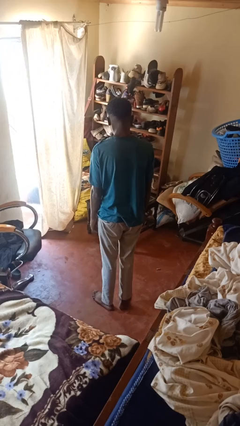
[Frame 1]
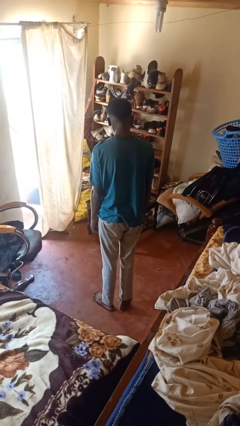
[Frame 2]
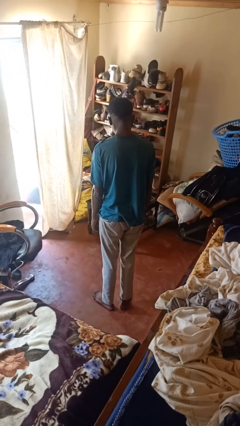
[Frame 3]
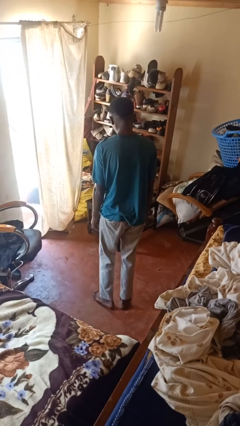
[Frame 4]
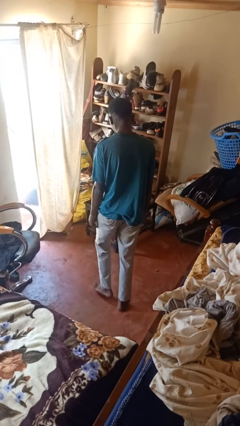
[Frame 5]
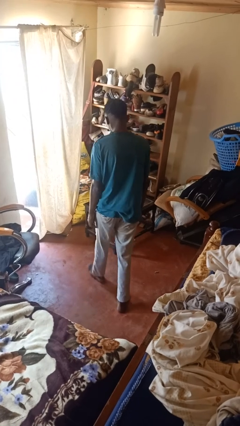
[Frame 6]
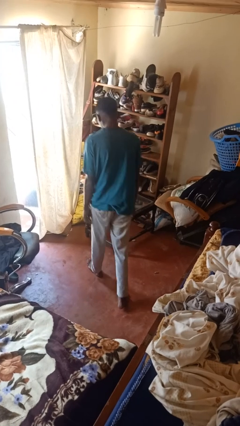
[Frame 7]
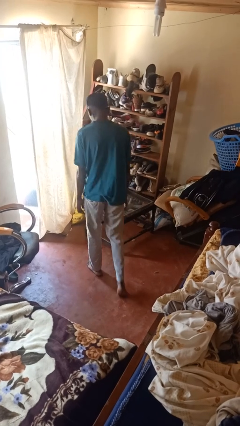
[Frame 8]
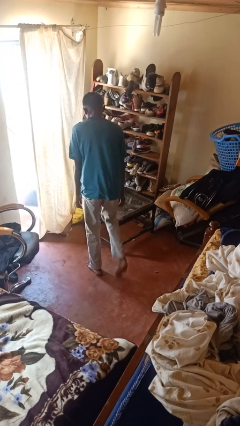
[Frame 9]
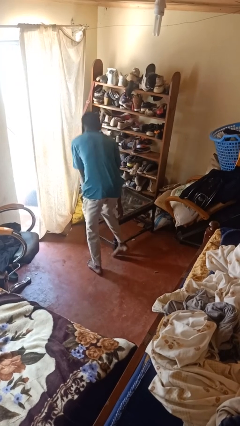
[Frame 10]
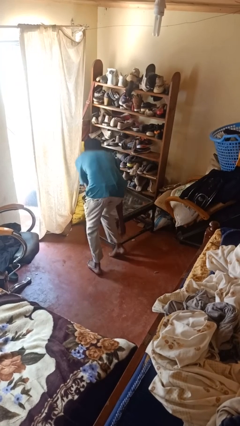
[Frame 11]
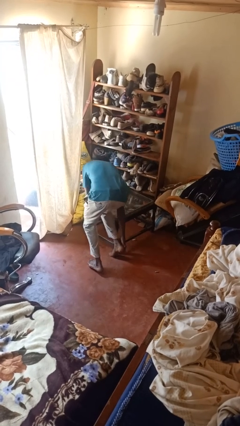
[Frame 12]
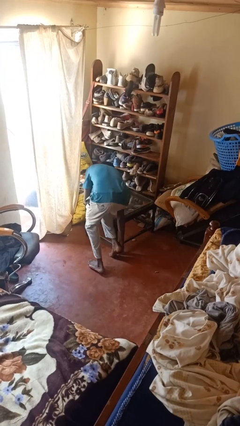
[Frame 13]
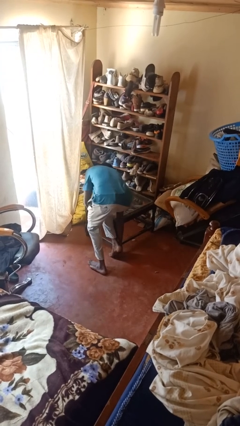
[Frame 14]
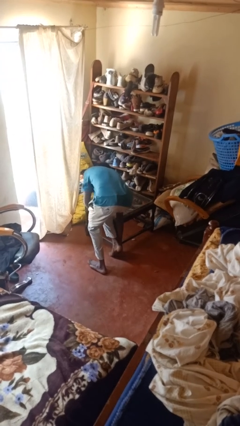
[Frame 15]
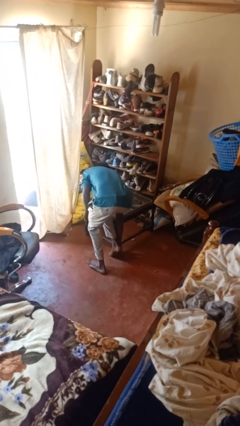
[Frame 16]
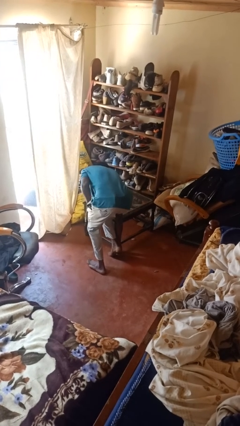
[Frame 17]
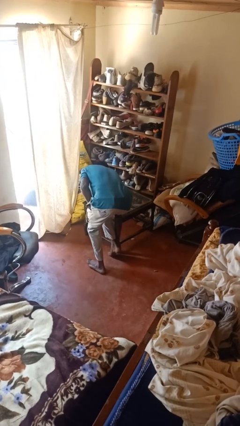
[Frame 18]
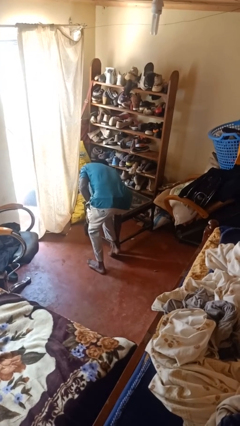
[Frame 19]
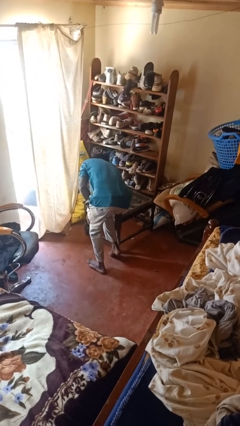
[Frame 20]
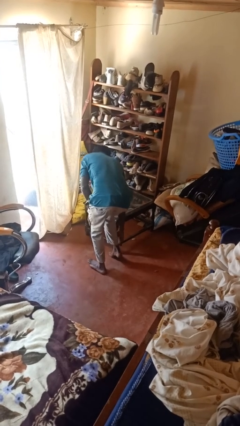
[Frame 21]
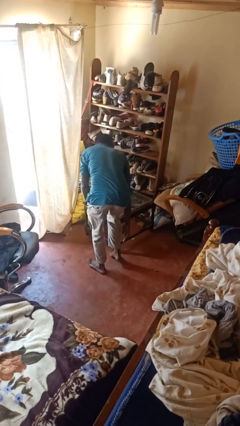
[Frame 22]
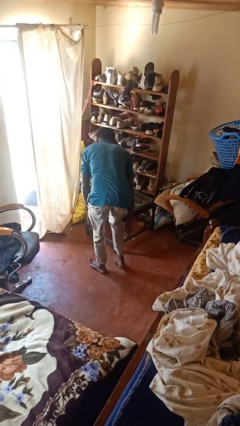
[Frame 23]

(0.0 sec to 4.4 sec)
person stubs toe

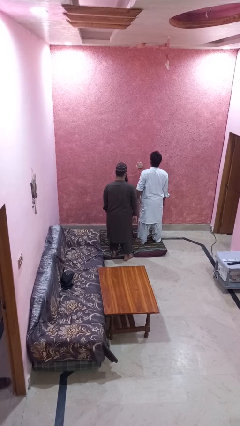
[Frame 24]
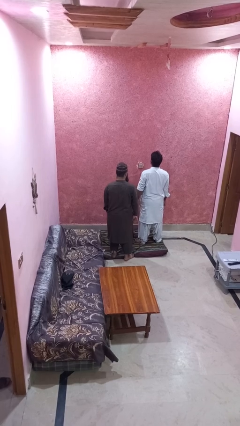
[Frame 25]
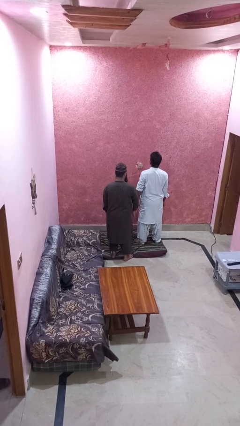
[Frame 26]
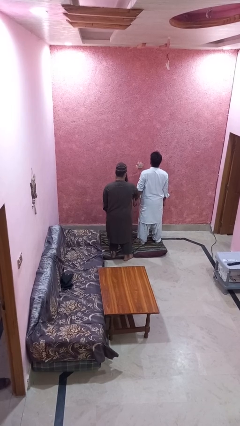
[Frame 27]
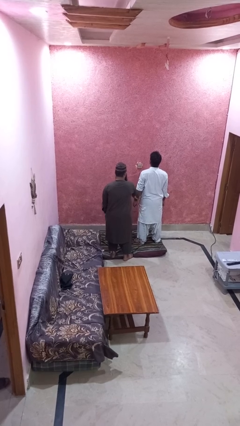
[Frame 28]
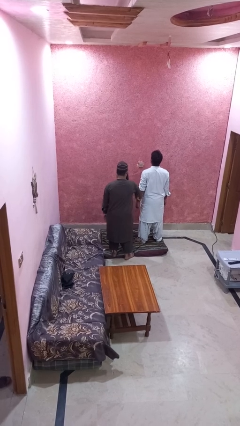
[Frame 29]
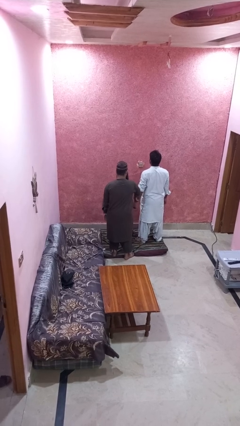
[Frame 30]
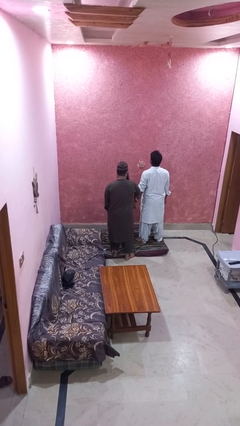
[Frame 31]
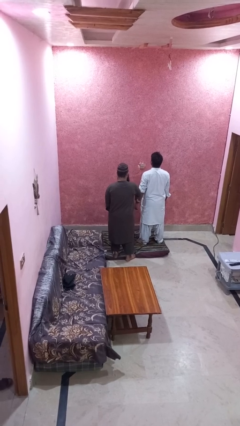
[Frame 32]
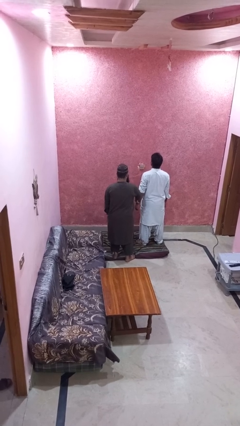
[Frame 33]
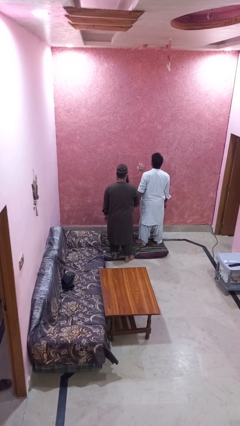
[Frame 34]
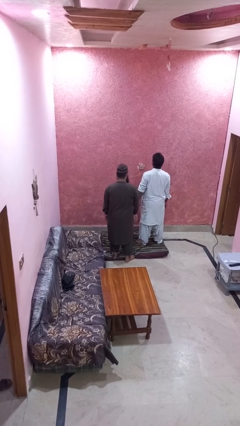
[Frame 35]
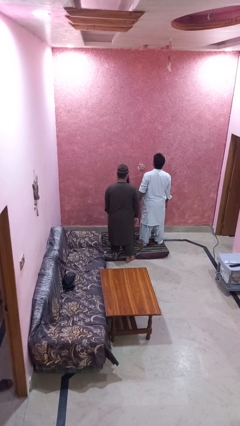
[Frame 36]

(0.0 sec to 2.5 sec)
person grabs person by forearm

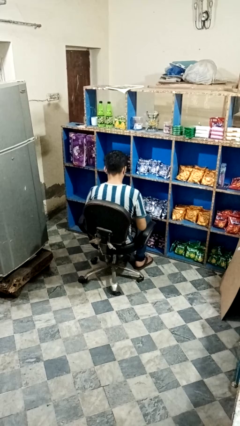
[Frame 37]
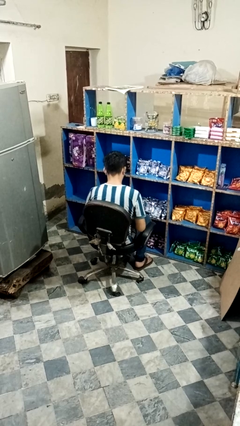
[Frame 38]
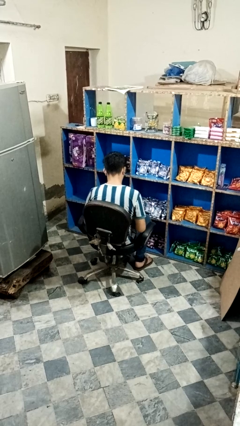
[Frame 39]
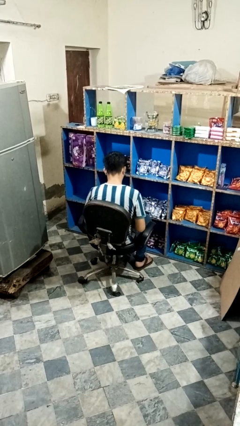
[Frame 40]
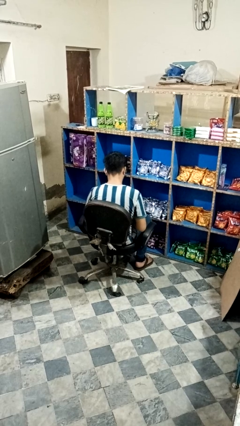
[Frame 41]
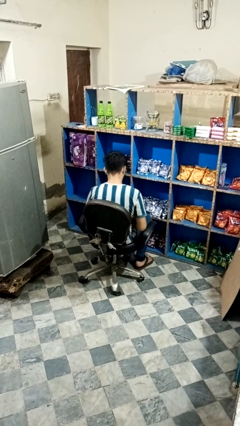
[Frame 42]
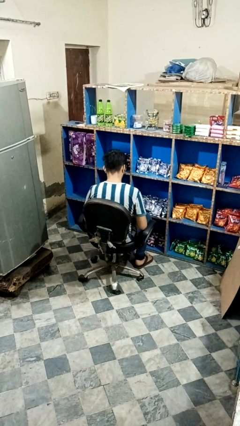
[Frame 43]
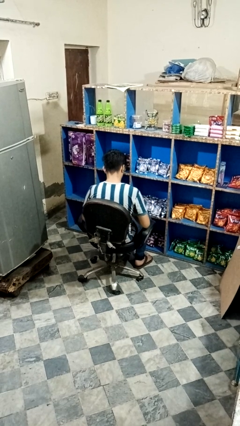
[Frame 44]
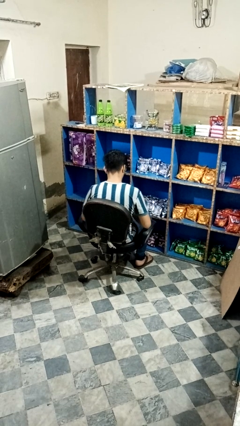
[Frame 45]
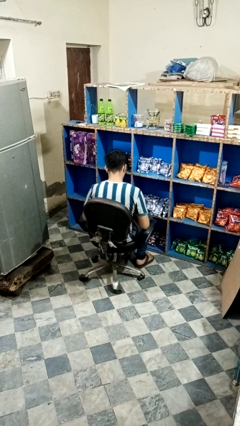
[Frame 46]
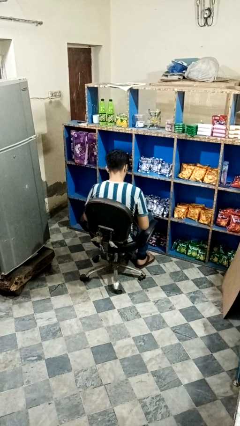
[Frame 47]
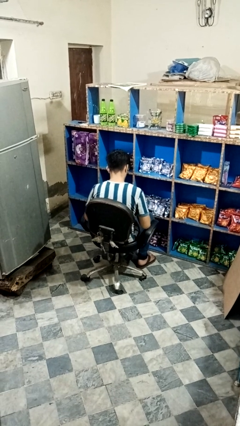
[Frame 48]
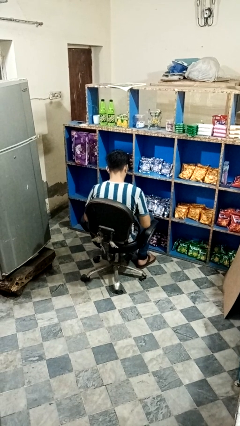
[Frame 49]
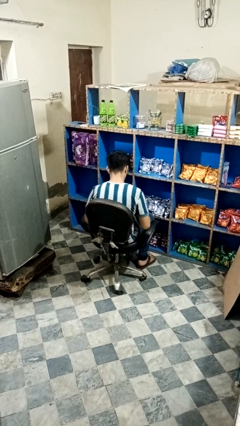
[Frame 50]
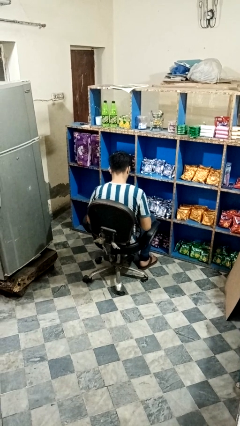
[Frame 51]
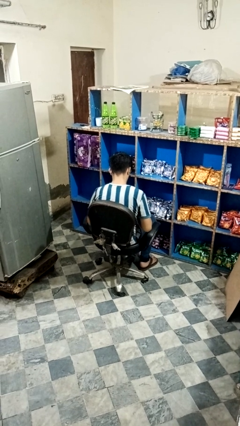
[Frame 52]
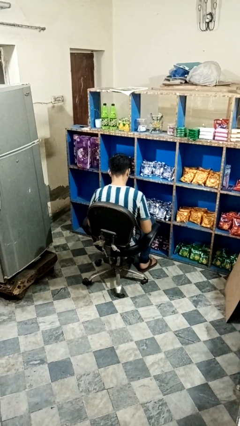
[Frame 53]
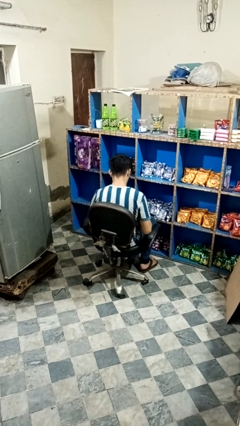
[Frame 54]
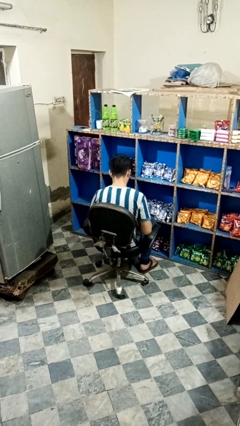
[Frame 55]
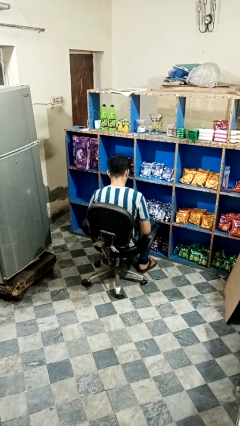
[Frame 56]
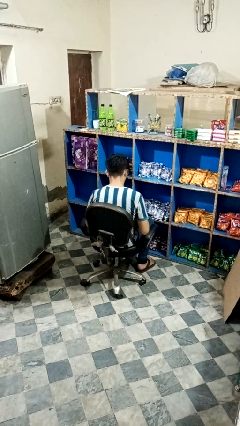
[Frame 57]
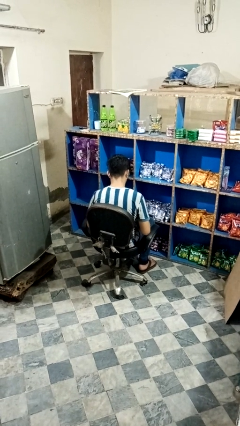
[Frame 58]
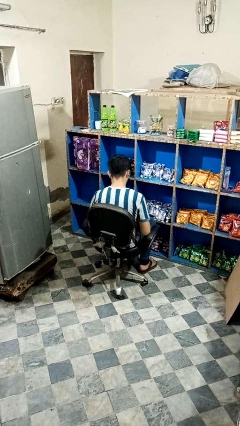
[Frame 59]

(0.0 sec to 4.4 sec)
person looks at hands in lap

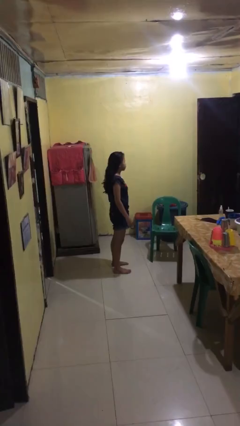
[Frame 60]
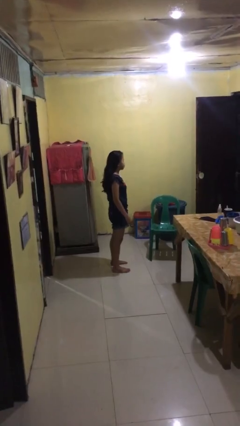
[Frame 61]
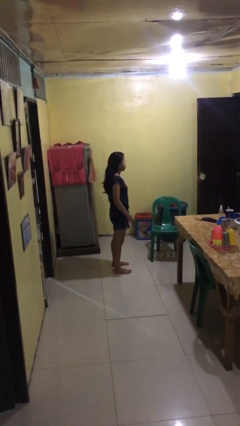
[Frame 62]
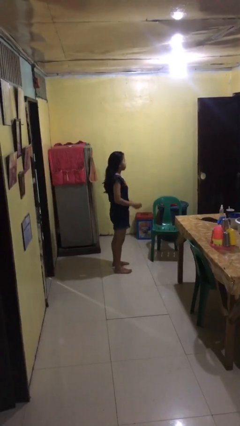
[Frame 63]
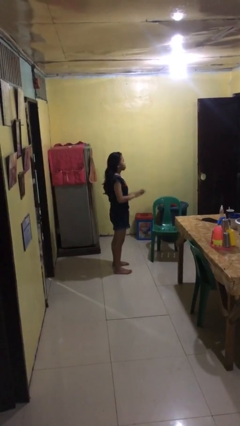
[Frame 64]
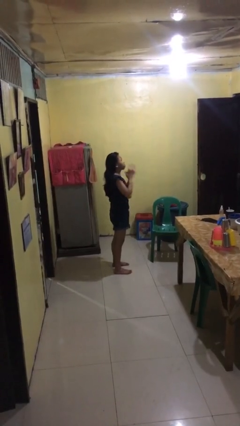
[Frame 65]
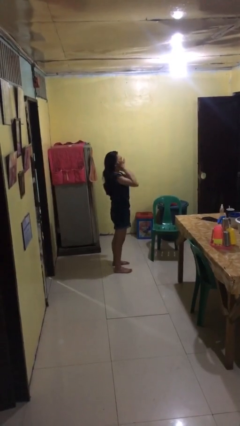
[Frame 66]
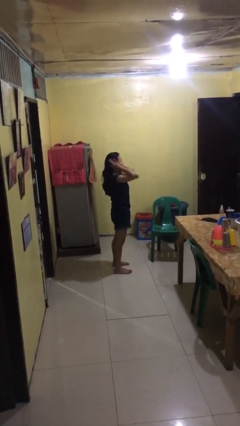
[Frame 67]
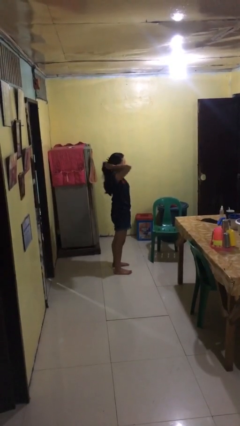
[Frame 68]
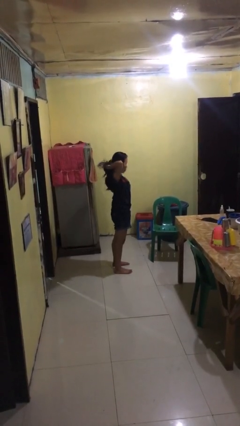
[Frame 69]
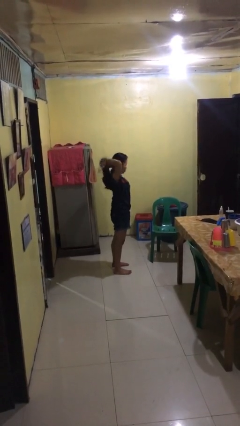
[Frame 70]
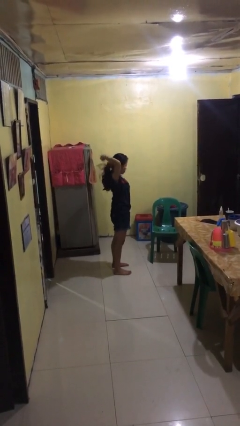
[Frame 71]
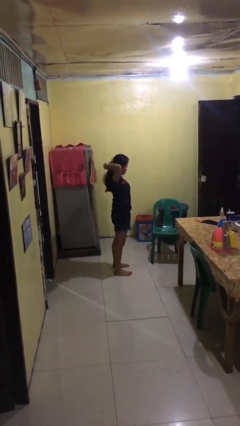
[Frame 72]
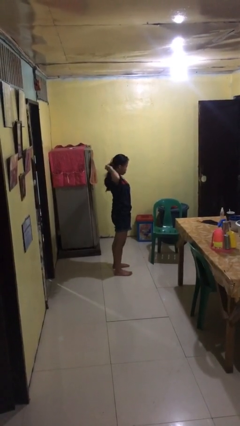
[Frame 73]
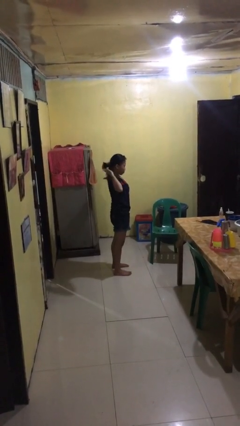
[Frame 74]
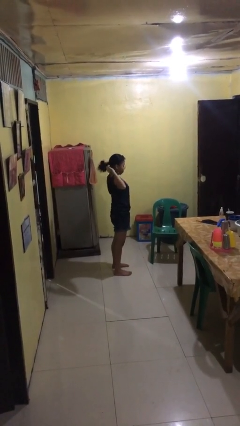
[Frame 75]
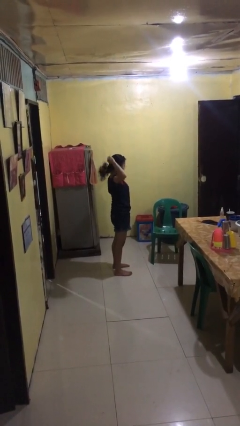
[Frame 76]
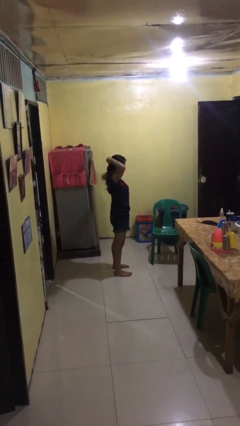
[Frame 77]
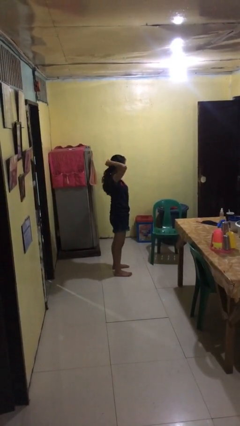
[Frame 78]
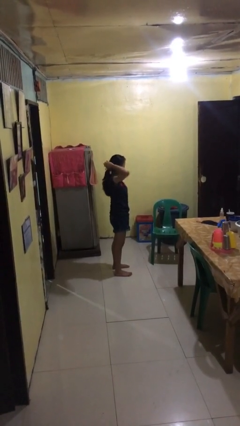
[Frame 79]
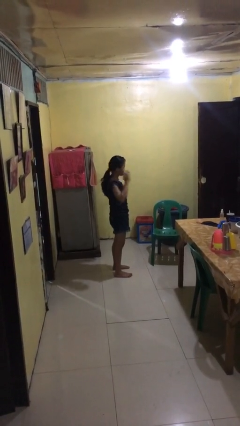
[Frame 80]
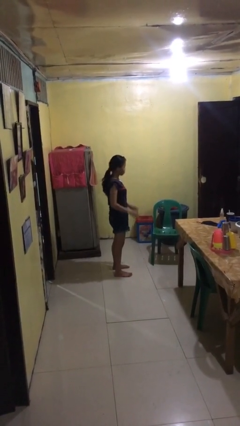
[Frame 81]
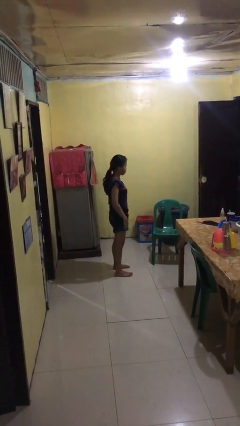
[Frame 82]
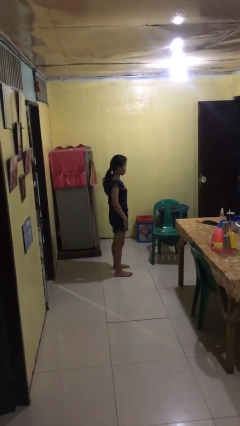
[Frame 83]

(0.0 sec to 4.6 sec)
person puts hair in ponytail

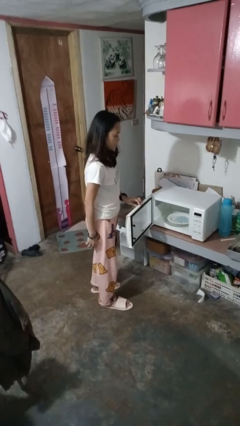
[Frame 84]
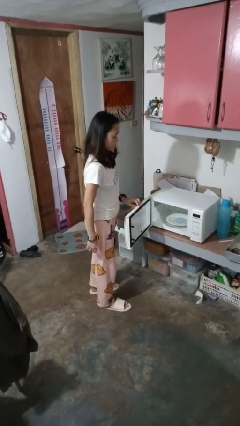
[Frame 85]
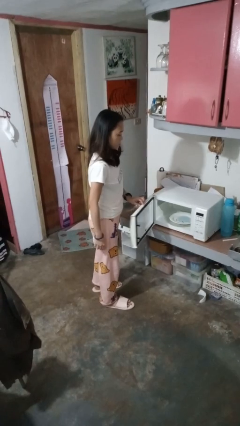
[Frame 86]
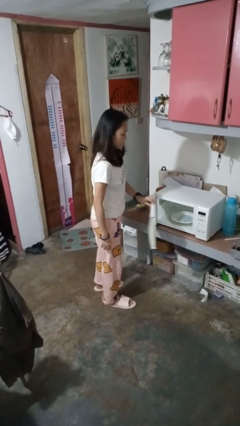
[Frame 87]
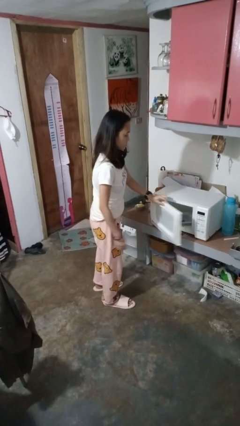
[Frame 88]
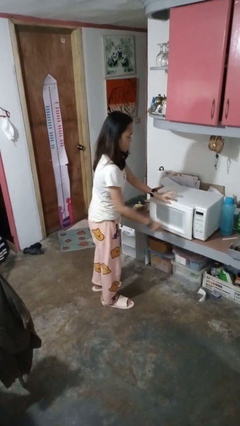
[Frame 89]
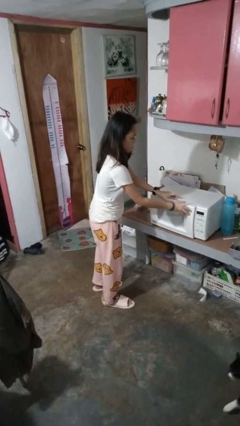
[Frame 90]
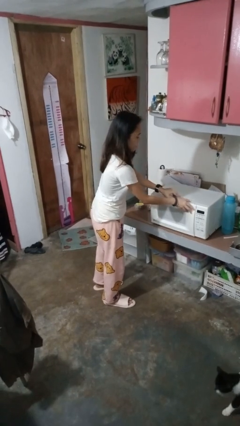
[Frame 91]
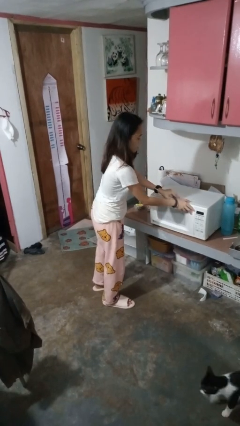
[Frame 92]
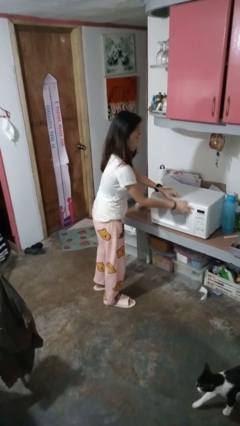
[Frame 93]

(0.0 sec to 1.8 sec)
person closes microwave
